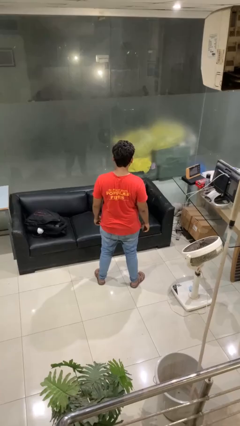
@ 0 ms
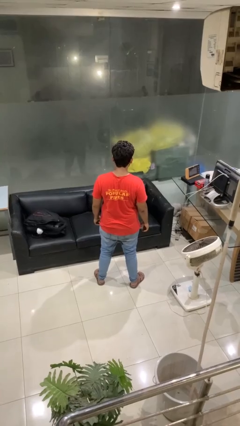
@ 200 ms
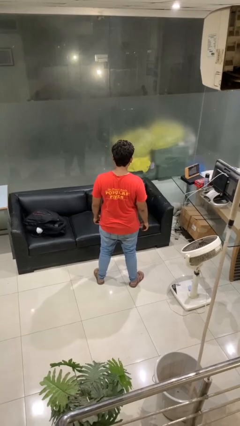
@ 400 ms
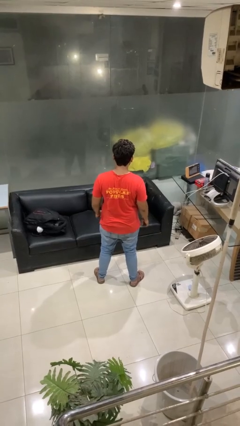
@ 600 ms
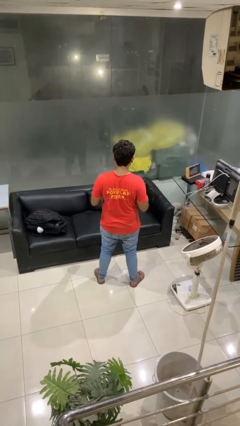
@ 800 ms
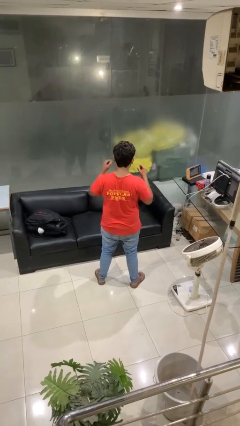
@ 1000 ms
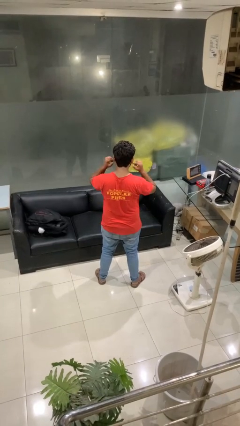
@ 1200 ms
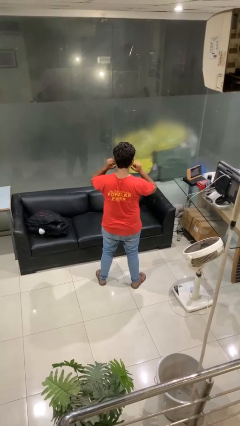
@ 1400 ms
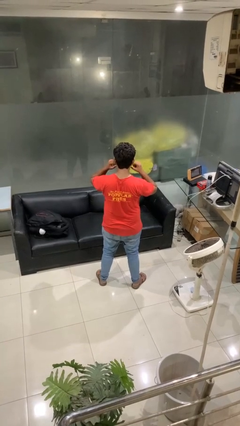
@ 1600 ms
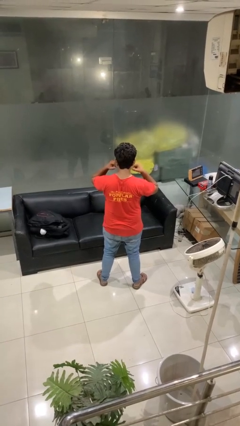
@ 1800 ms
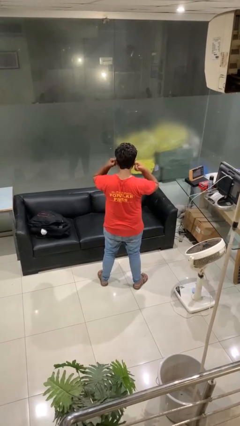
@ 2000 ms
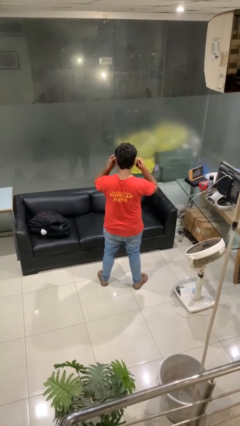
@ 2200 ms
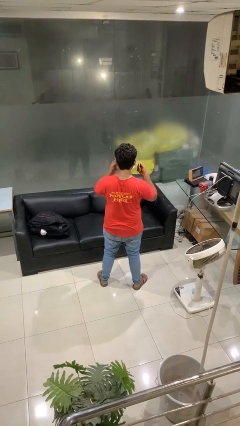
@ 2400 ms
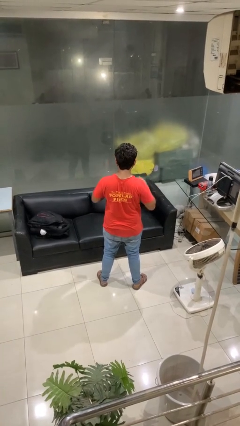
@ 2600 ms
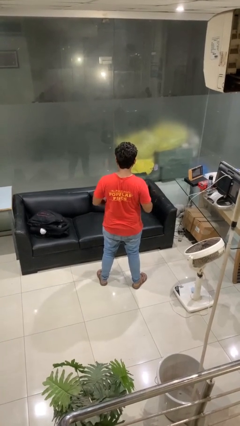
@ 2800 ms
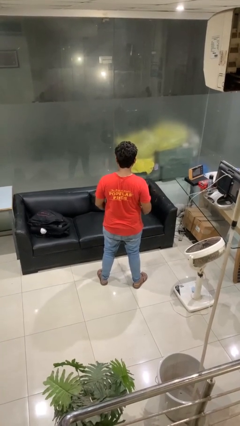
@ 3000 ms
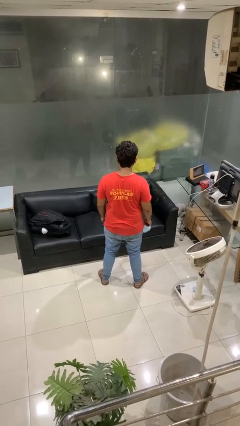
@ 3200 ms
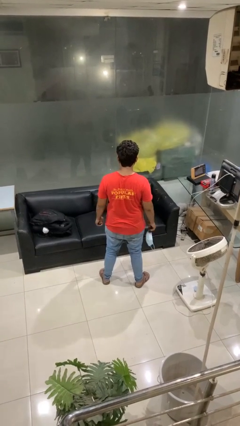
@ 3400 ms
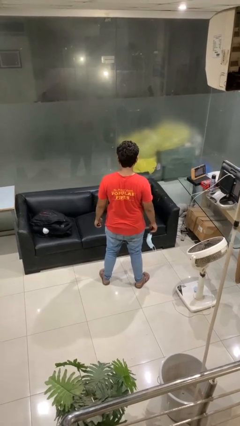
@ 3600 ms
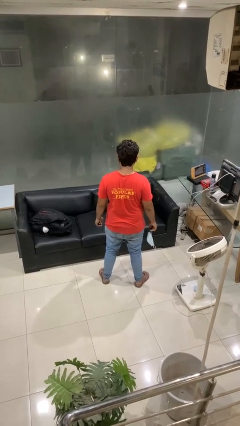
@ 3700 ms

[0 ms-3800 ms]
person takes off facemask

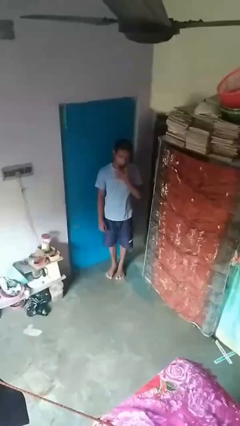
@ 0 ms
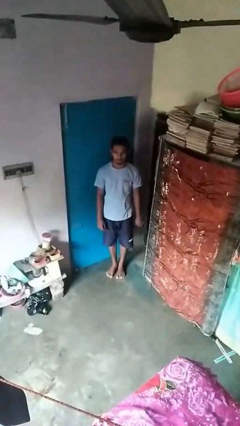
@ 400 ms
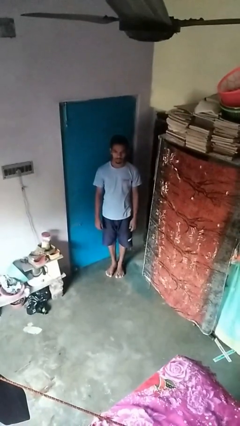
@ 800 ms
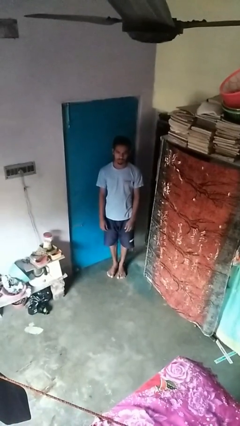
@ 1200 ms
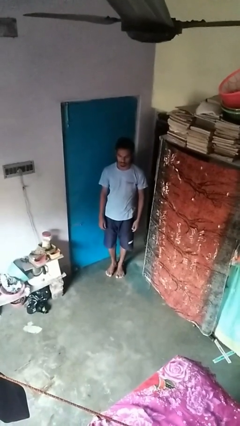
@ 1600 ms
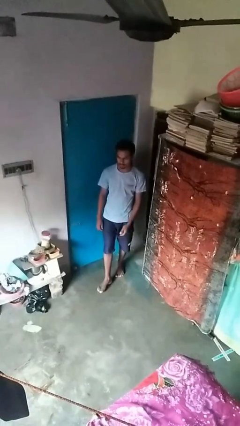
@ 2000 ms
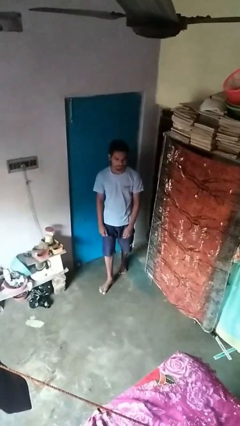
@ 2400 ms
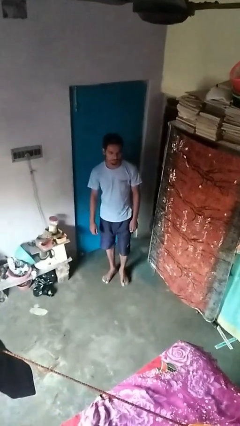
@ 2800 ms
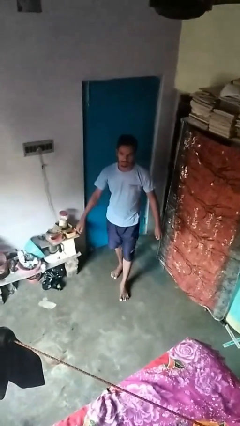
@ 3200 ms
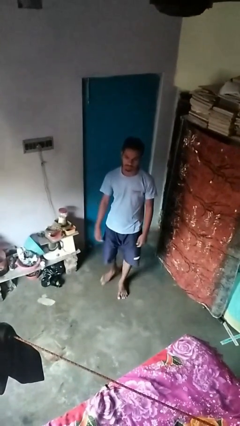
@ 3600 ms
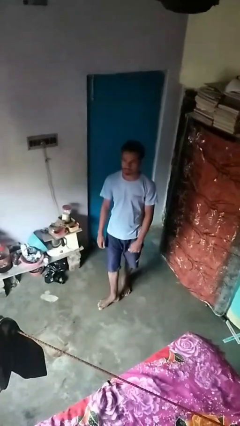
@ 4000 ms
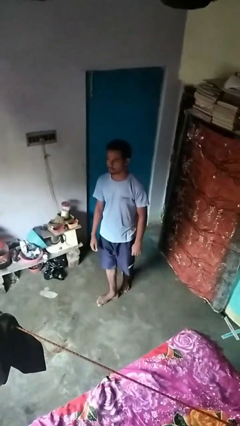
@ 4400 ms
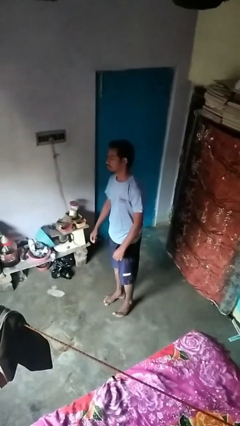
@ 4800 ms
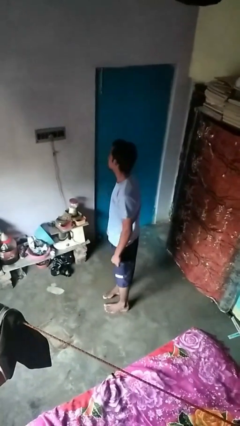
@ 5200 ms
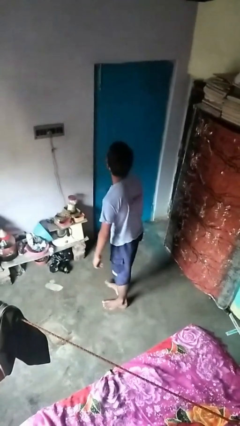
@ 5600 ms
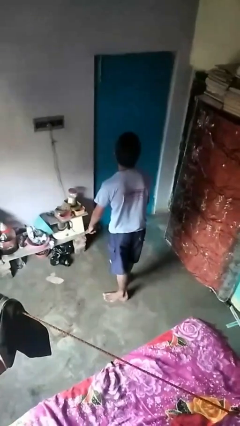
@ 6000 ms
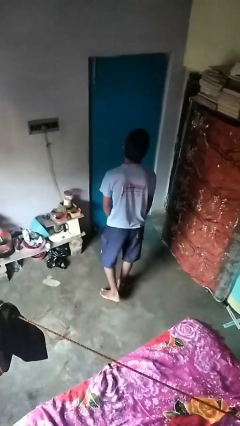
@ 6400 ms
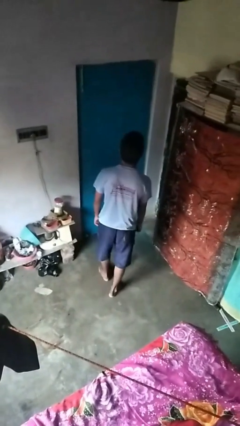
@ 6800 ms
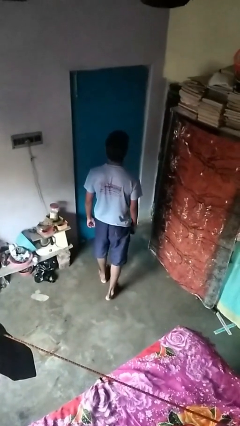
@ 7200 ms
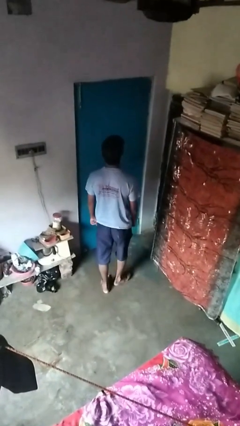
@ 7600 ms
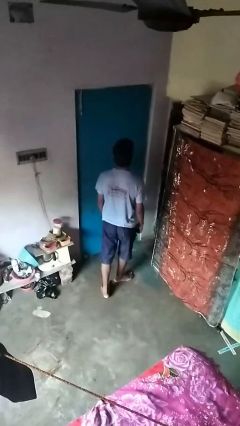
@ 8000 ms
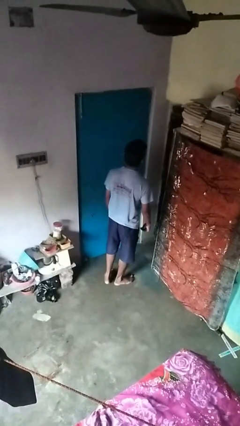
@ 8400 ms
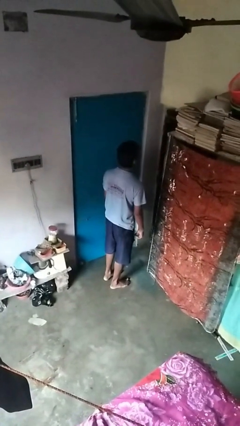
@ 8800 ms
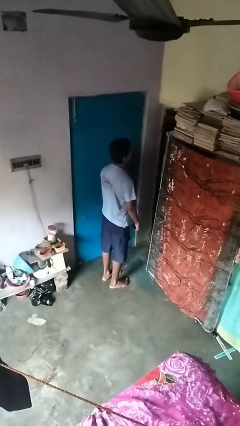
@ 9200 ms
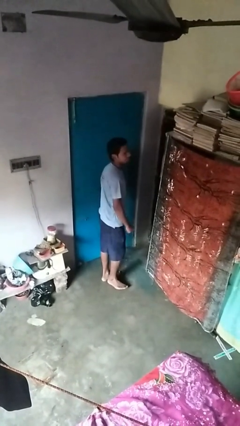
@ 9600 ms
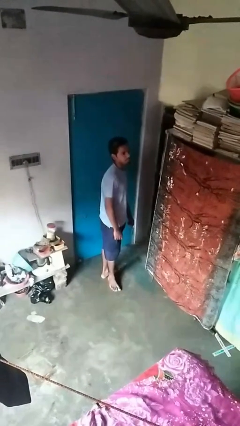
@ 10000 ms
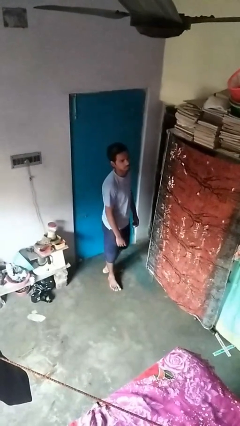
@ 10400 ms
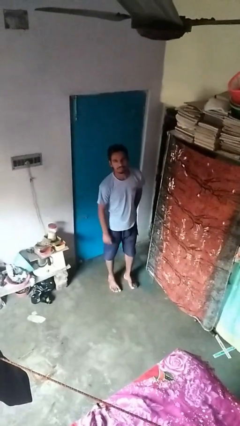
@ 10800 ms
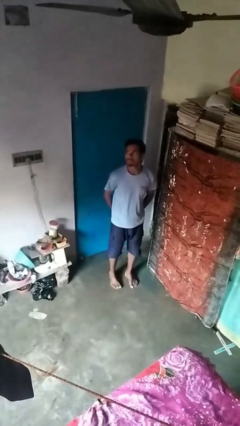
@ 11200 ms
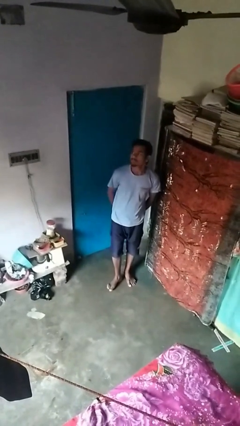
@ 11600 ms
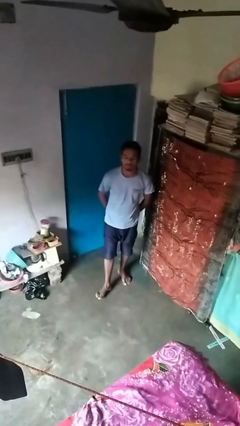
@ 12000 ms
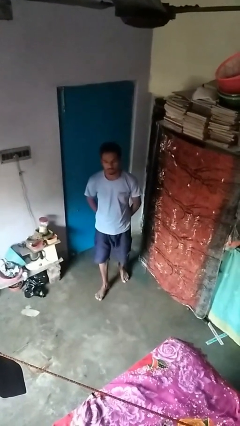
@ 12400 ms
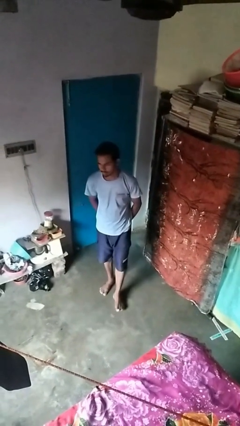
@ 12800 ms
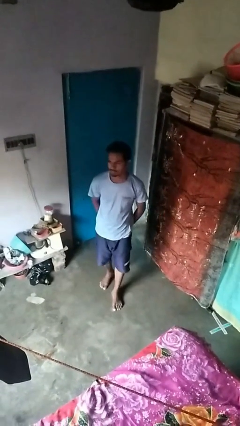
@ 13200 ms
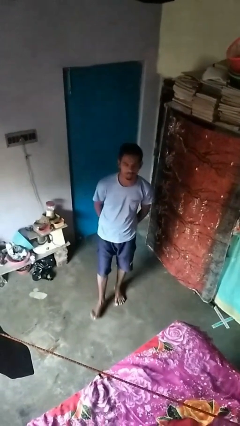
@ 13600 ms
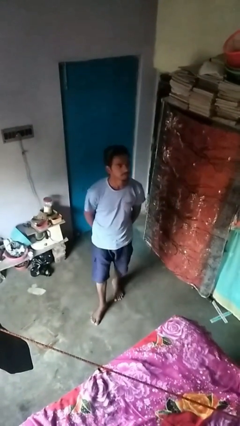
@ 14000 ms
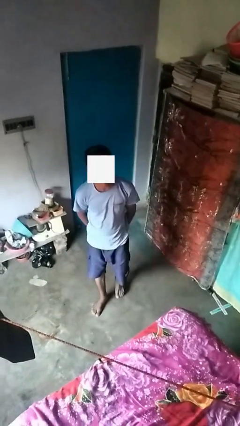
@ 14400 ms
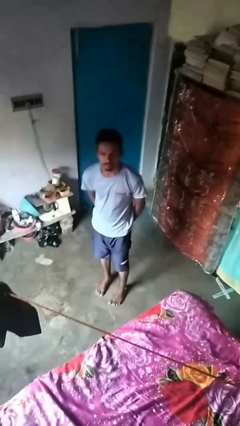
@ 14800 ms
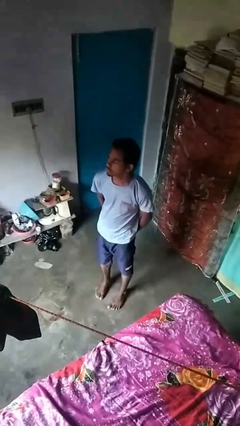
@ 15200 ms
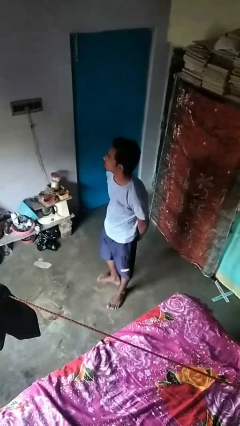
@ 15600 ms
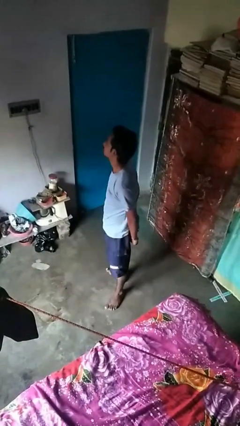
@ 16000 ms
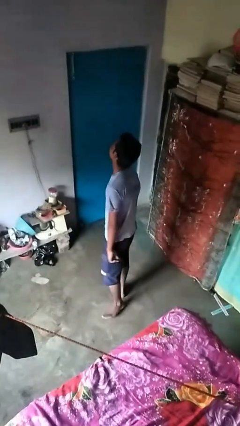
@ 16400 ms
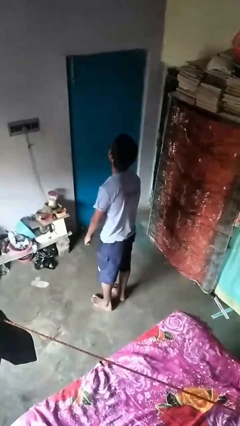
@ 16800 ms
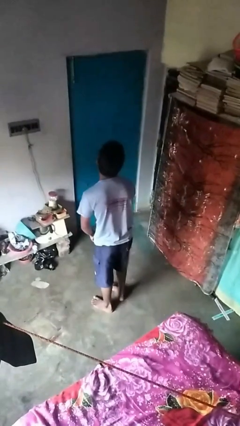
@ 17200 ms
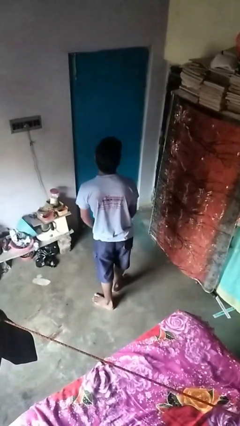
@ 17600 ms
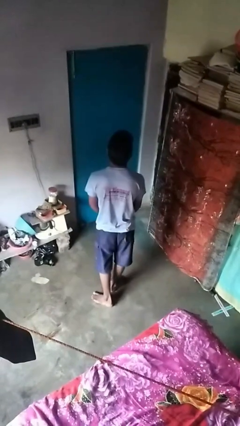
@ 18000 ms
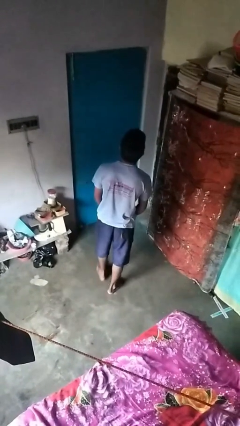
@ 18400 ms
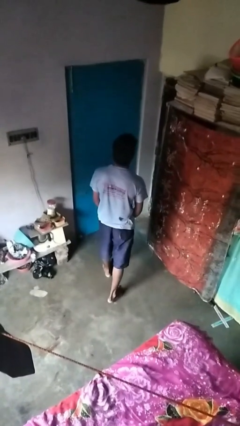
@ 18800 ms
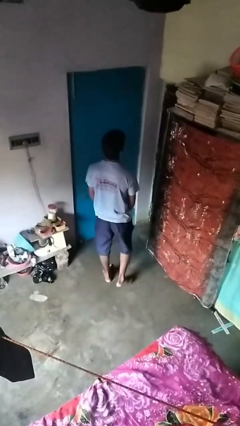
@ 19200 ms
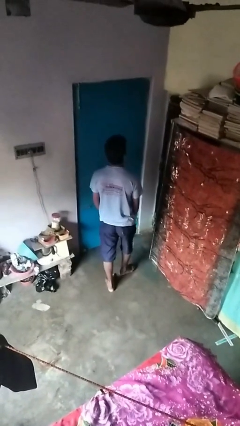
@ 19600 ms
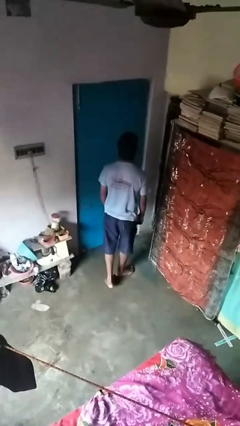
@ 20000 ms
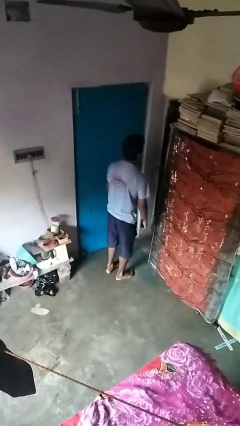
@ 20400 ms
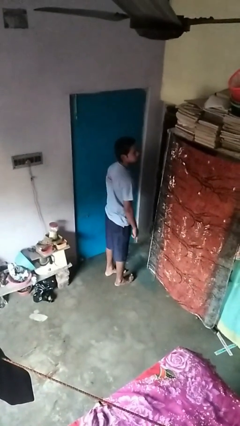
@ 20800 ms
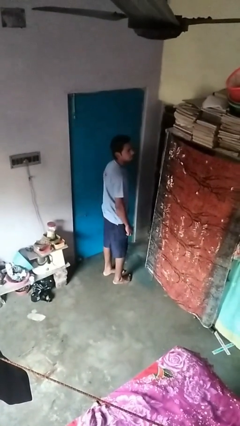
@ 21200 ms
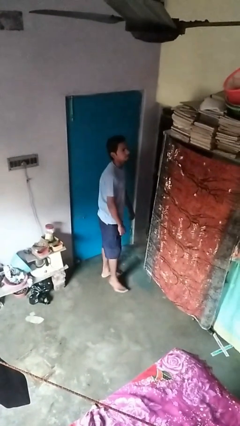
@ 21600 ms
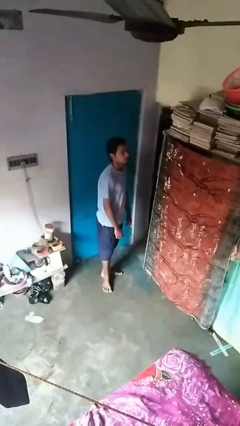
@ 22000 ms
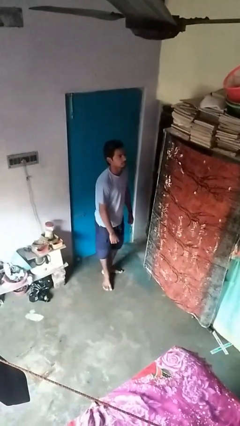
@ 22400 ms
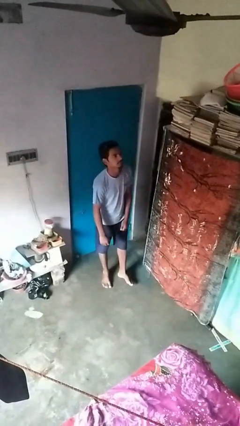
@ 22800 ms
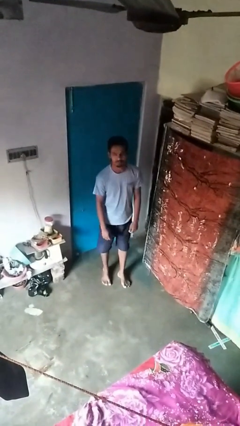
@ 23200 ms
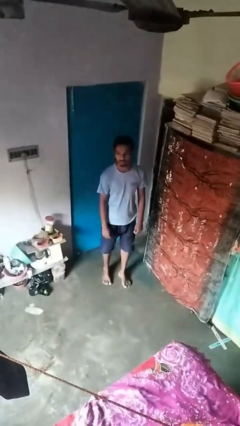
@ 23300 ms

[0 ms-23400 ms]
person walks

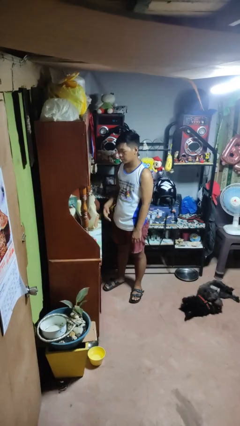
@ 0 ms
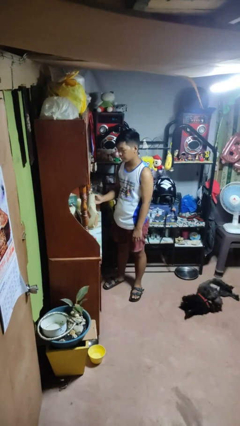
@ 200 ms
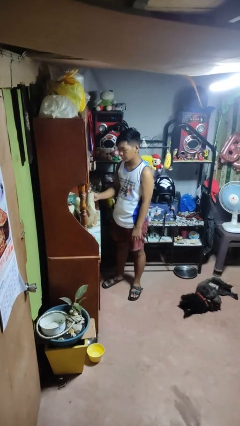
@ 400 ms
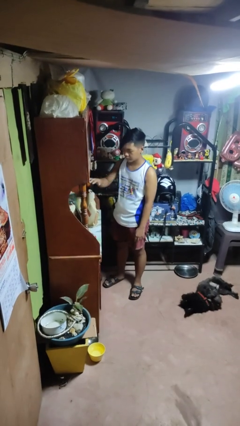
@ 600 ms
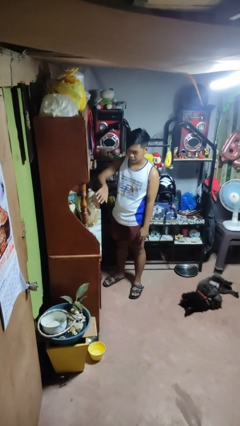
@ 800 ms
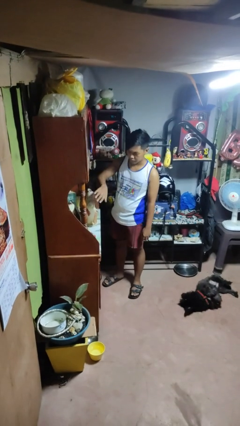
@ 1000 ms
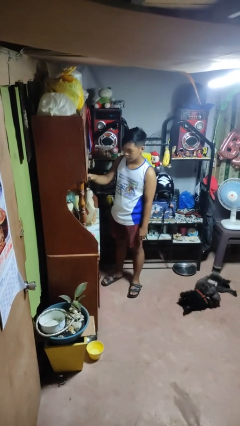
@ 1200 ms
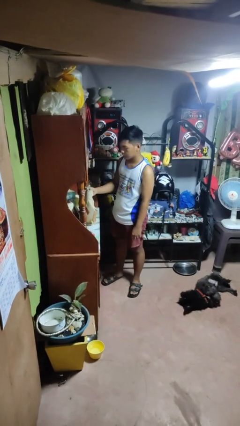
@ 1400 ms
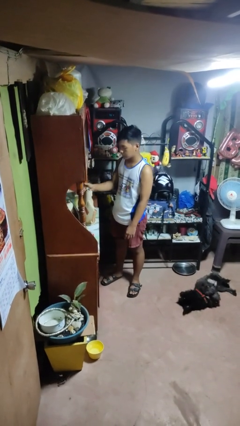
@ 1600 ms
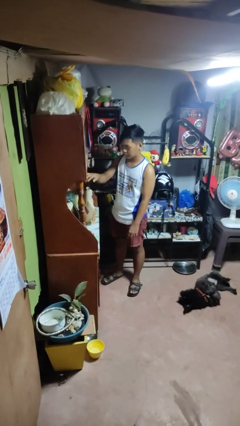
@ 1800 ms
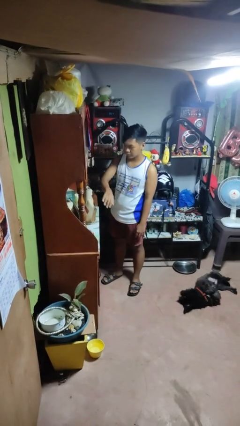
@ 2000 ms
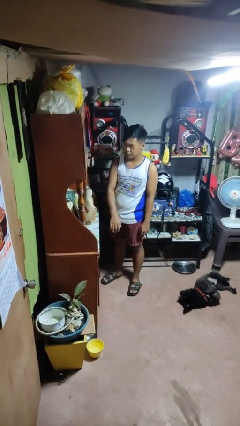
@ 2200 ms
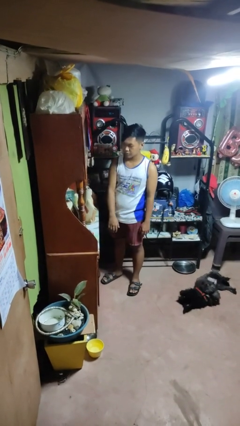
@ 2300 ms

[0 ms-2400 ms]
person waves hand over object

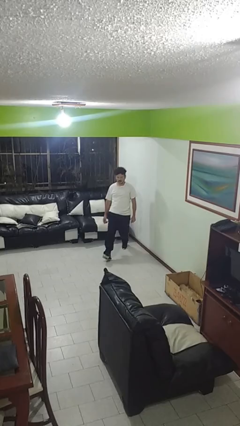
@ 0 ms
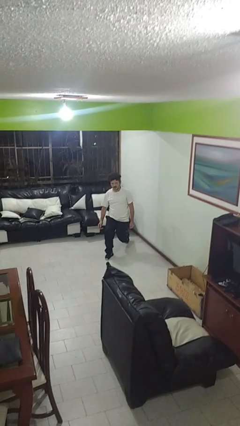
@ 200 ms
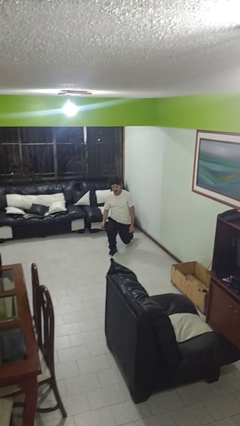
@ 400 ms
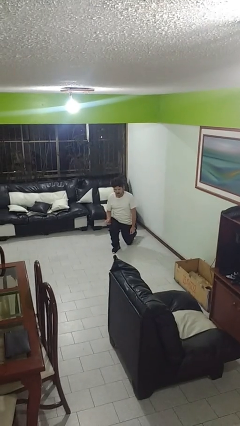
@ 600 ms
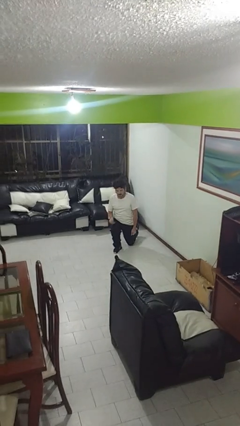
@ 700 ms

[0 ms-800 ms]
person kneels
